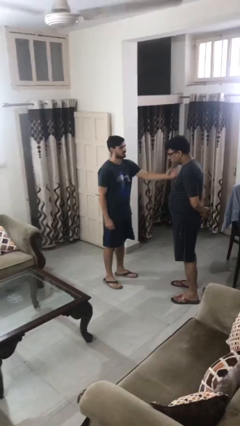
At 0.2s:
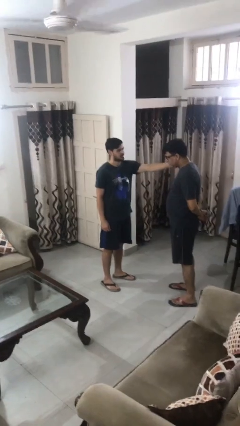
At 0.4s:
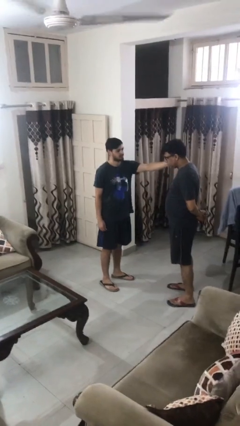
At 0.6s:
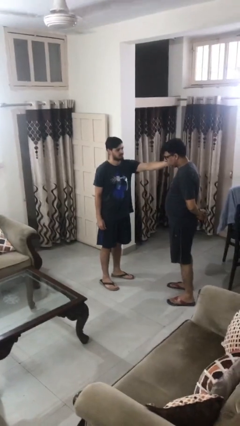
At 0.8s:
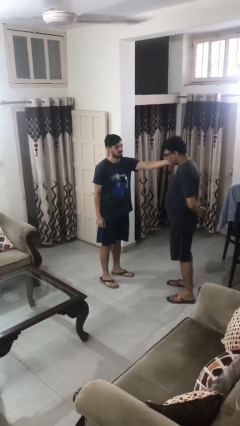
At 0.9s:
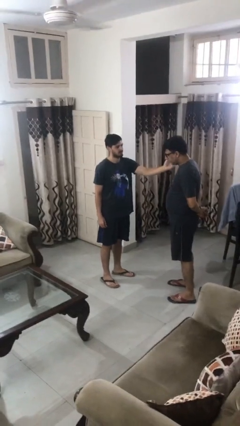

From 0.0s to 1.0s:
person touches face of person

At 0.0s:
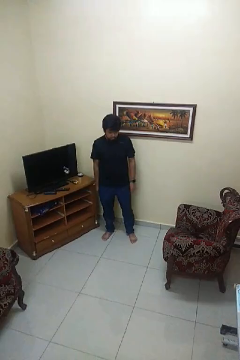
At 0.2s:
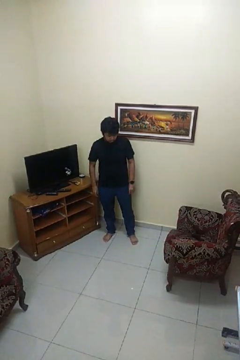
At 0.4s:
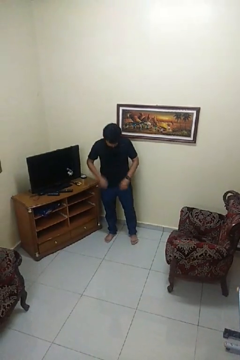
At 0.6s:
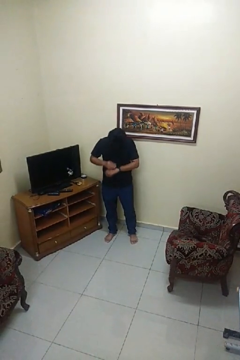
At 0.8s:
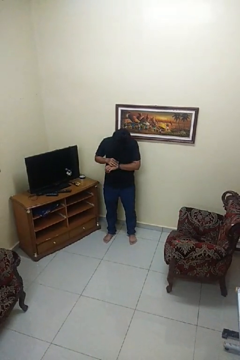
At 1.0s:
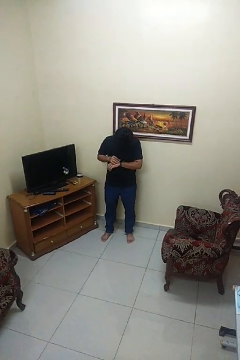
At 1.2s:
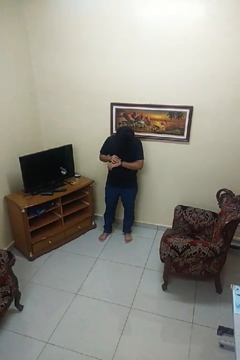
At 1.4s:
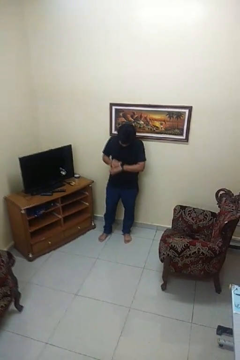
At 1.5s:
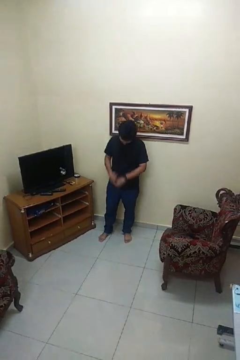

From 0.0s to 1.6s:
person looks at wristwatch

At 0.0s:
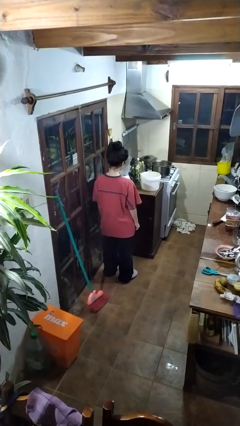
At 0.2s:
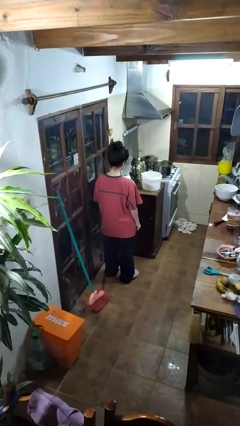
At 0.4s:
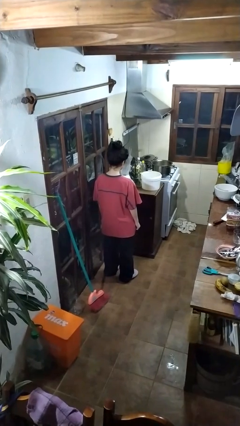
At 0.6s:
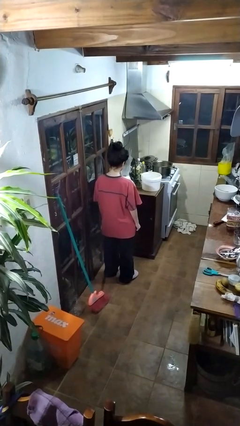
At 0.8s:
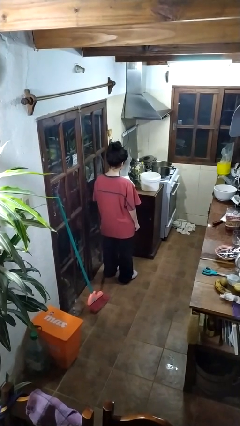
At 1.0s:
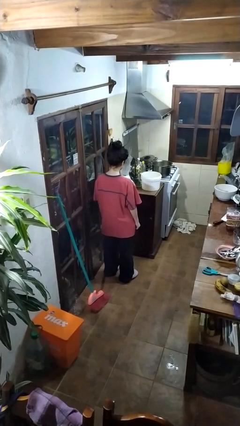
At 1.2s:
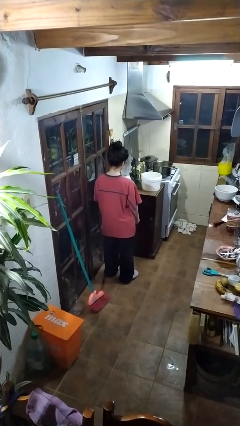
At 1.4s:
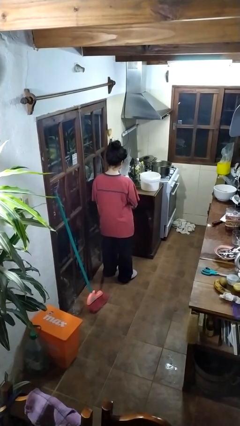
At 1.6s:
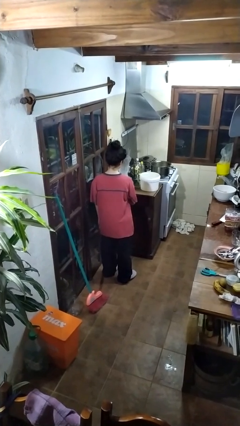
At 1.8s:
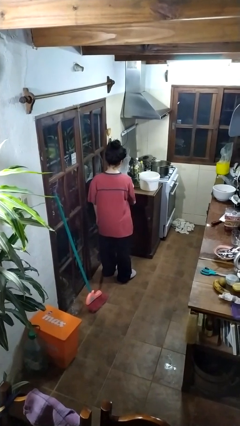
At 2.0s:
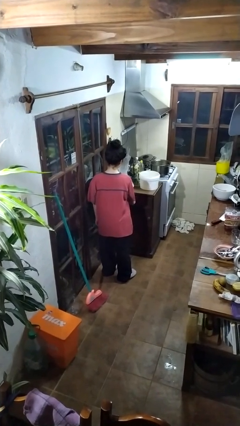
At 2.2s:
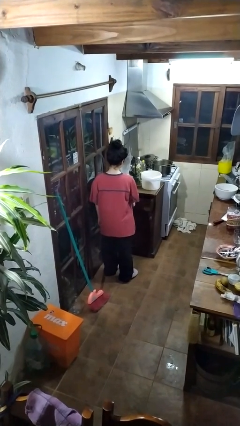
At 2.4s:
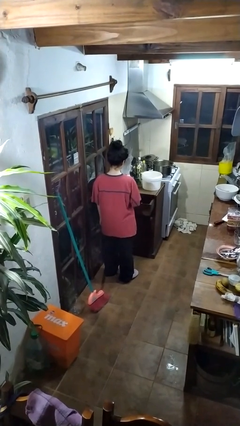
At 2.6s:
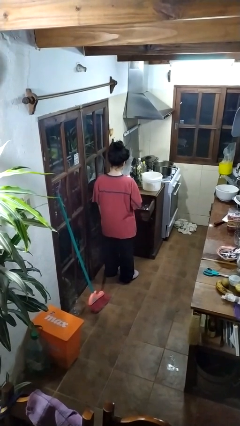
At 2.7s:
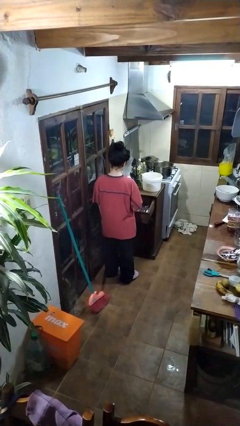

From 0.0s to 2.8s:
person opens kitchen drawer

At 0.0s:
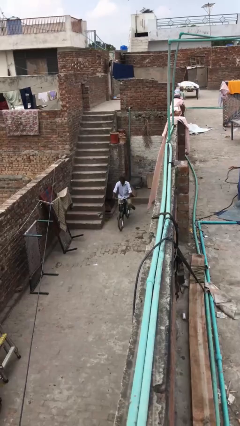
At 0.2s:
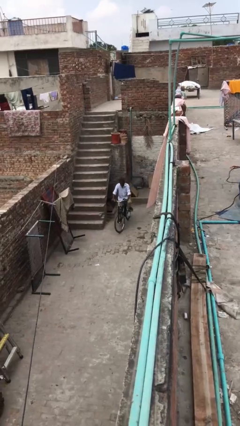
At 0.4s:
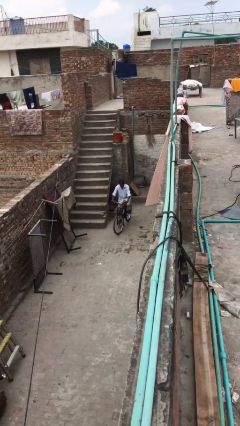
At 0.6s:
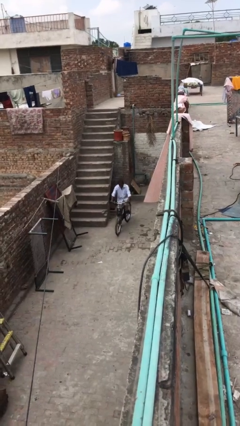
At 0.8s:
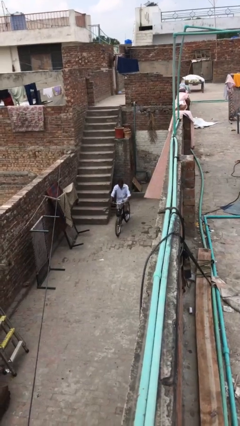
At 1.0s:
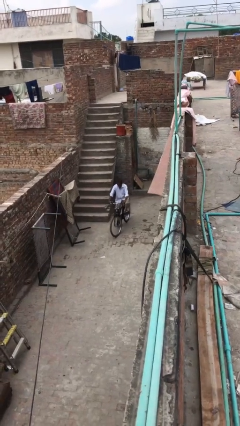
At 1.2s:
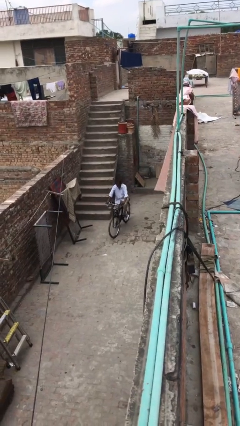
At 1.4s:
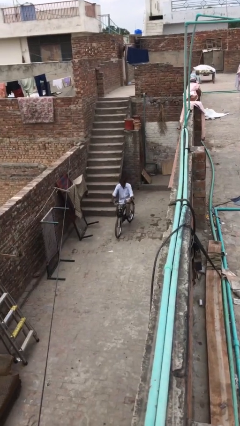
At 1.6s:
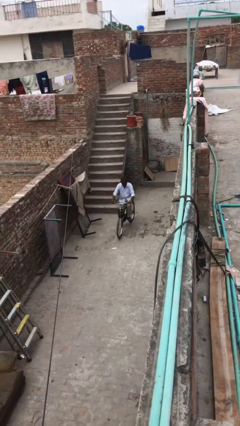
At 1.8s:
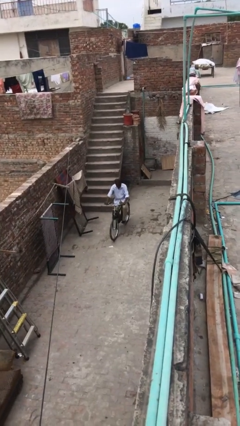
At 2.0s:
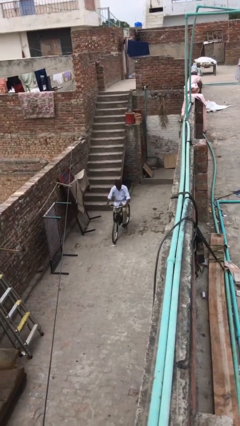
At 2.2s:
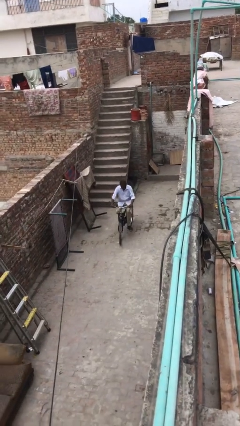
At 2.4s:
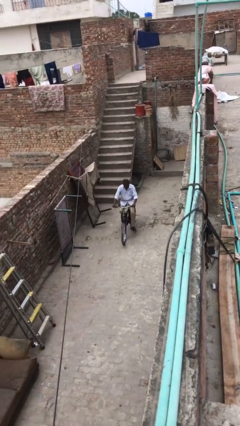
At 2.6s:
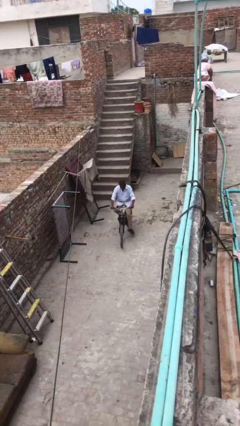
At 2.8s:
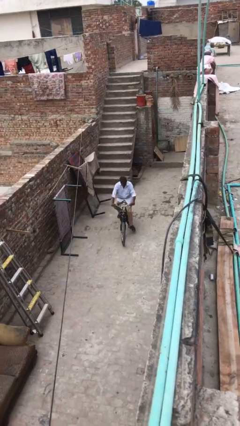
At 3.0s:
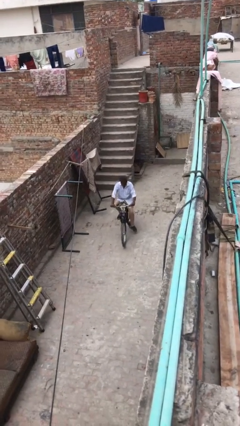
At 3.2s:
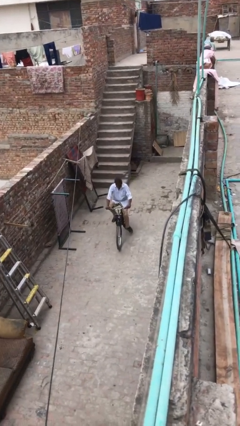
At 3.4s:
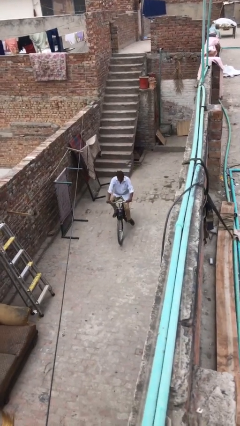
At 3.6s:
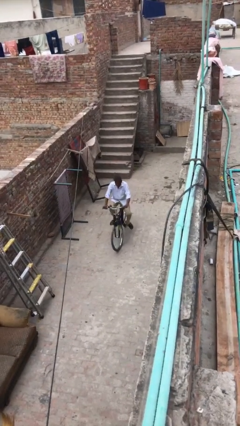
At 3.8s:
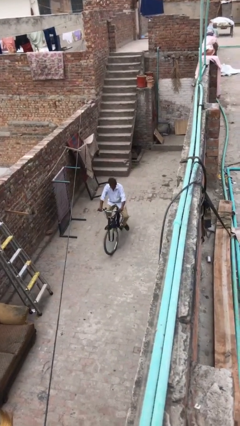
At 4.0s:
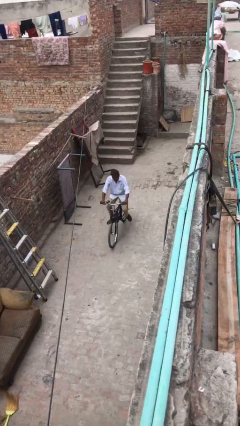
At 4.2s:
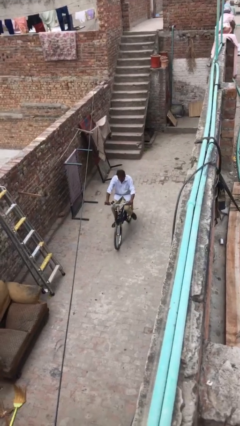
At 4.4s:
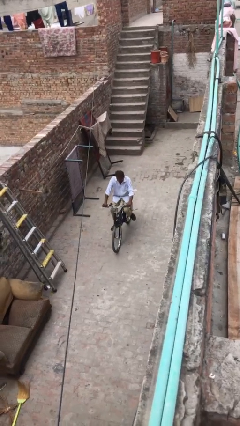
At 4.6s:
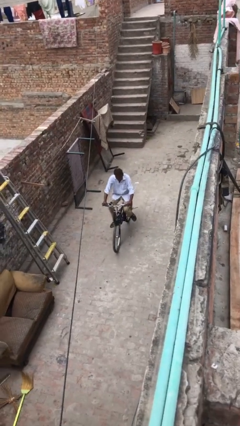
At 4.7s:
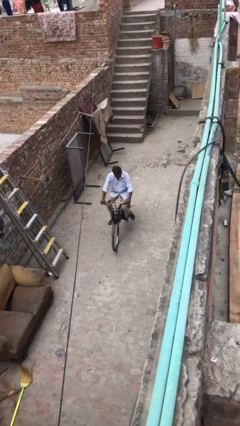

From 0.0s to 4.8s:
person rides bicycle

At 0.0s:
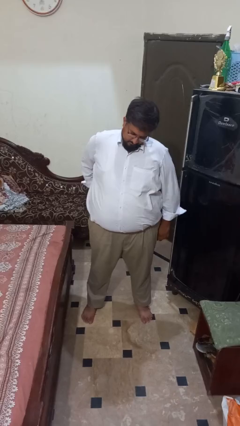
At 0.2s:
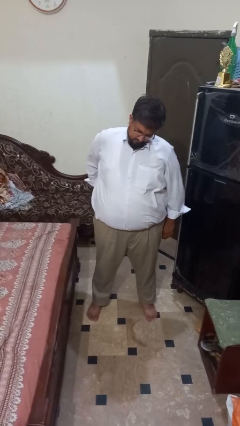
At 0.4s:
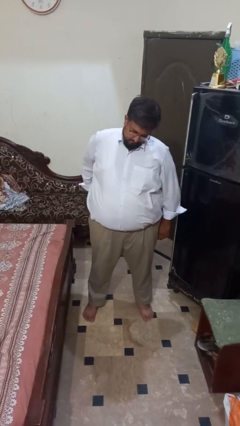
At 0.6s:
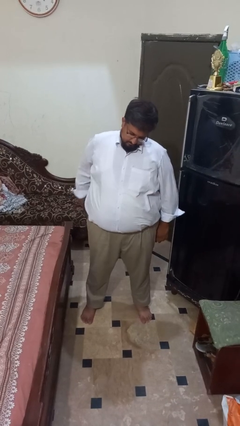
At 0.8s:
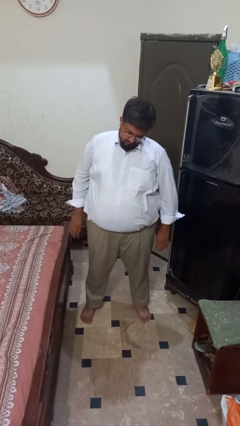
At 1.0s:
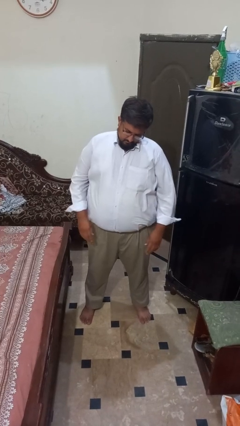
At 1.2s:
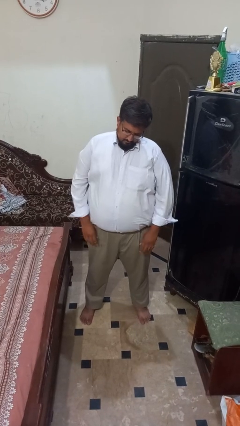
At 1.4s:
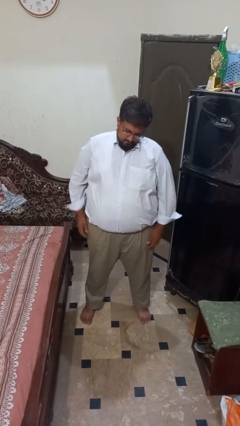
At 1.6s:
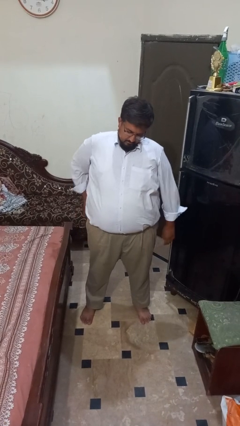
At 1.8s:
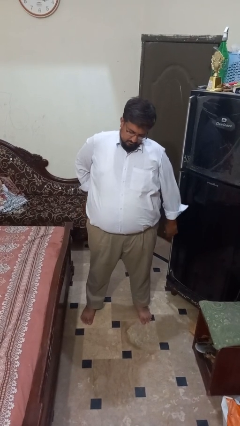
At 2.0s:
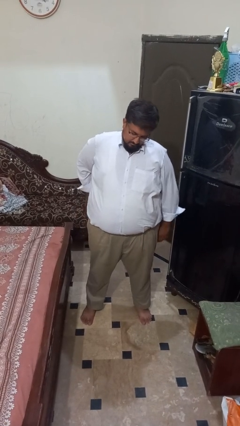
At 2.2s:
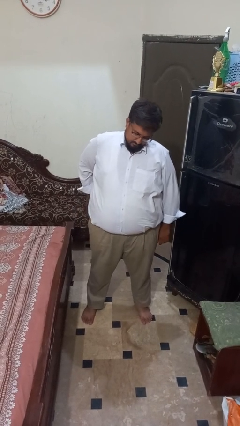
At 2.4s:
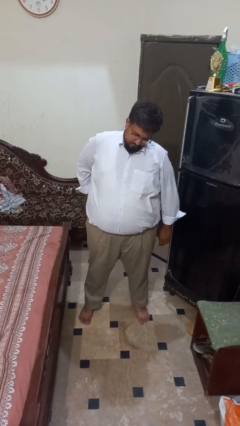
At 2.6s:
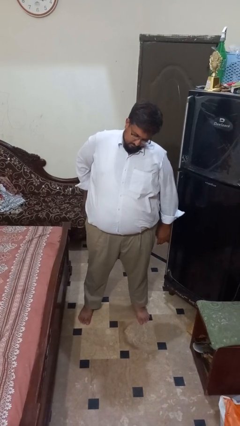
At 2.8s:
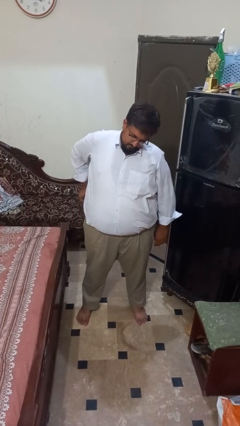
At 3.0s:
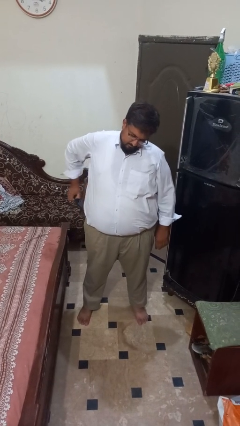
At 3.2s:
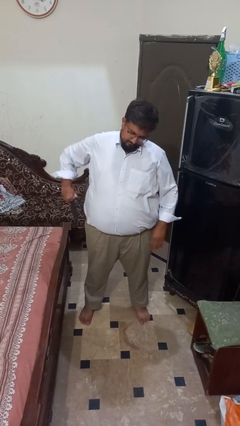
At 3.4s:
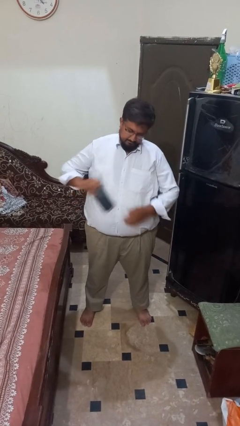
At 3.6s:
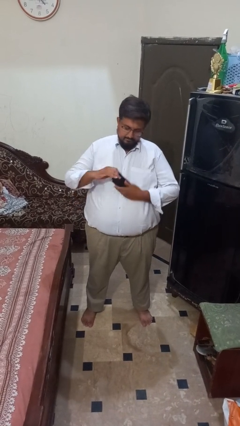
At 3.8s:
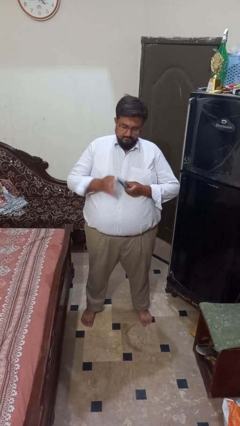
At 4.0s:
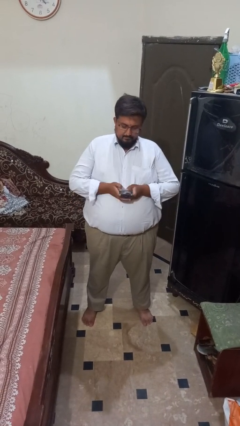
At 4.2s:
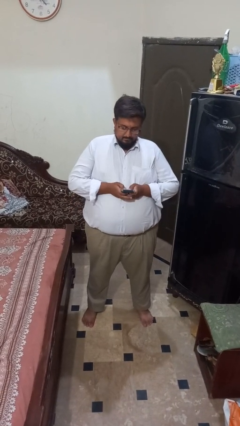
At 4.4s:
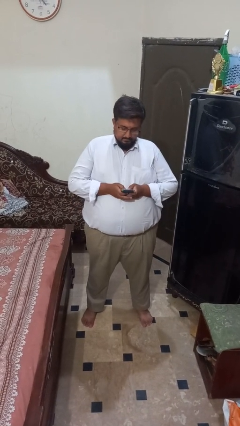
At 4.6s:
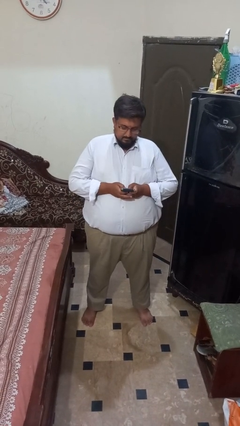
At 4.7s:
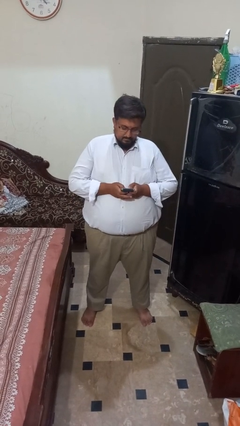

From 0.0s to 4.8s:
person takes phone from pocket

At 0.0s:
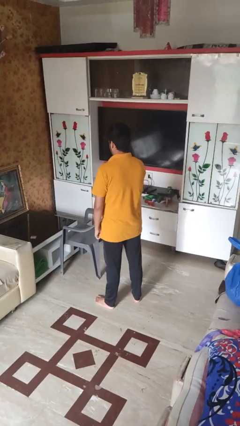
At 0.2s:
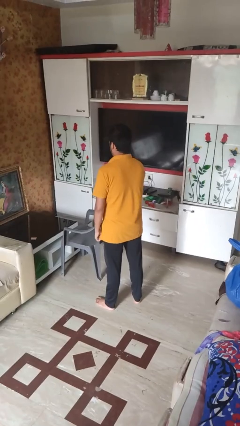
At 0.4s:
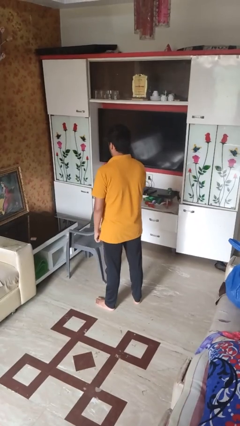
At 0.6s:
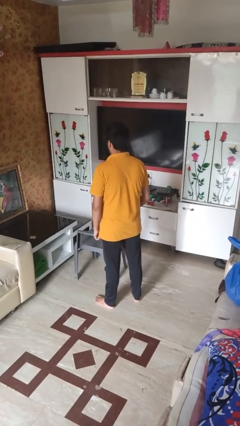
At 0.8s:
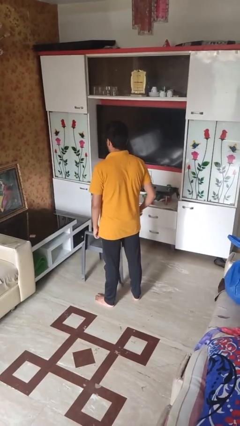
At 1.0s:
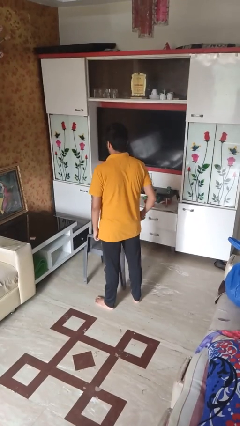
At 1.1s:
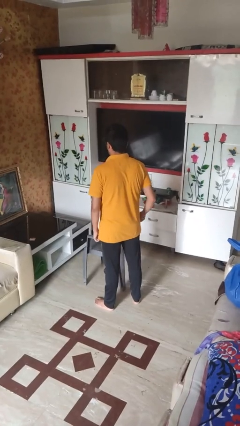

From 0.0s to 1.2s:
person pulls out chair

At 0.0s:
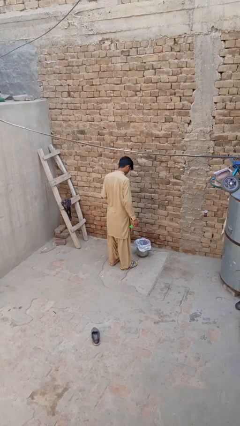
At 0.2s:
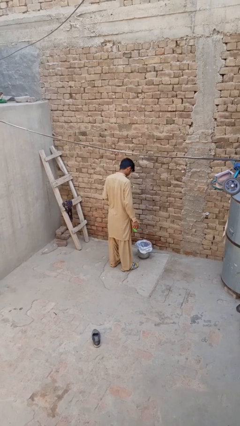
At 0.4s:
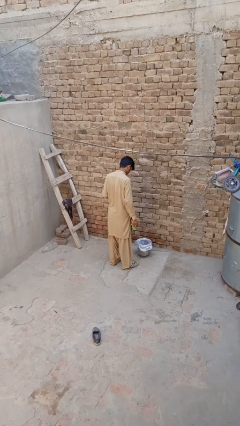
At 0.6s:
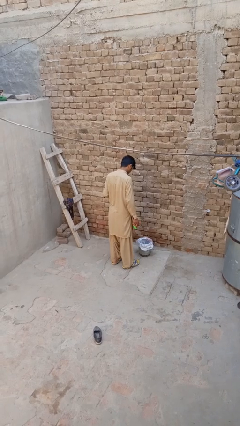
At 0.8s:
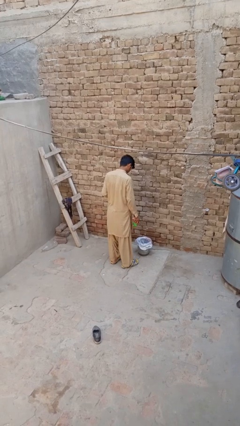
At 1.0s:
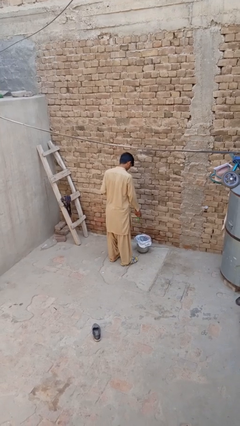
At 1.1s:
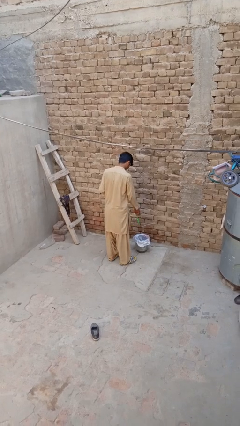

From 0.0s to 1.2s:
person discards trash

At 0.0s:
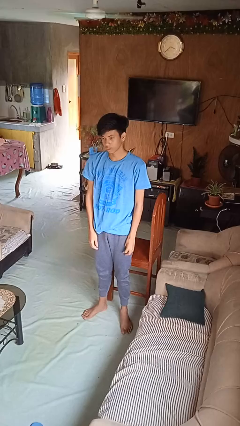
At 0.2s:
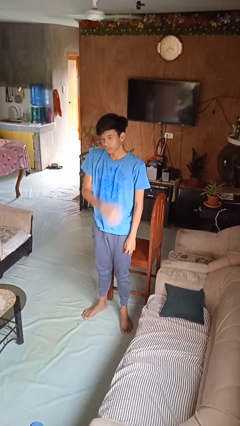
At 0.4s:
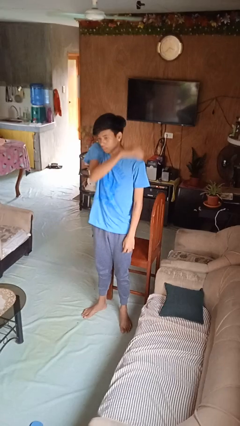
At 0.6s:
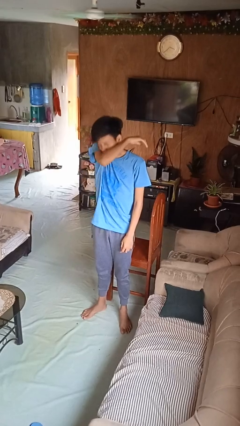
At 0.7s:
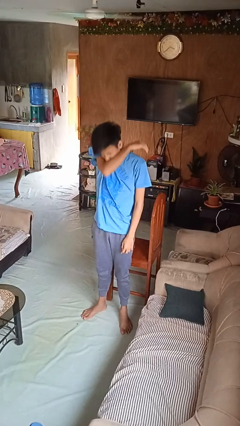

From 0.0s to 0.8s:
person sneezes into arm
